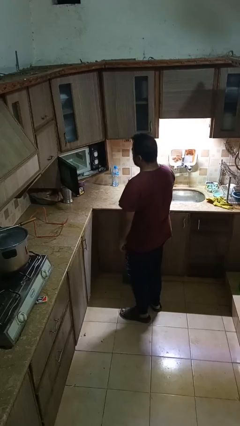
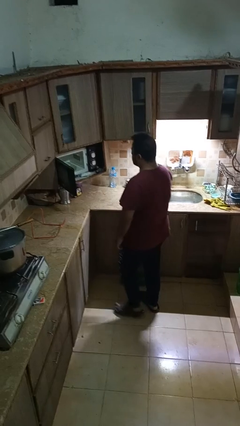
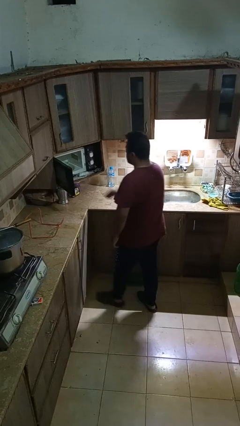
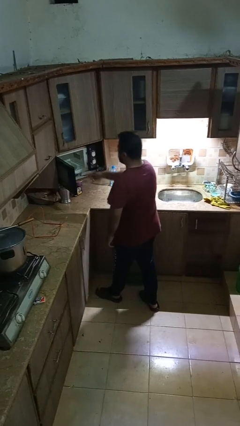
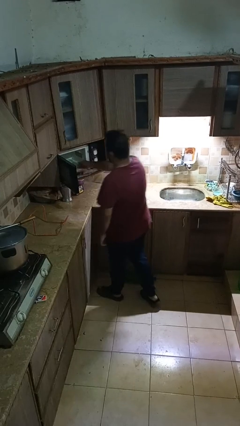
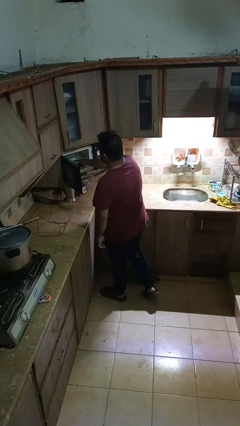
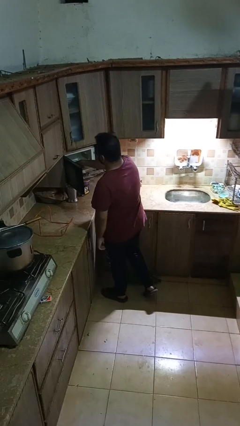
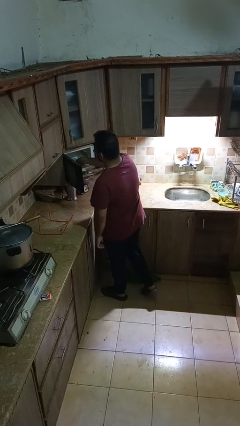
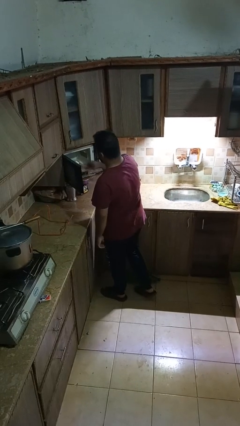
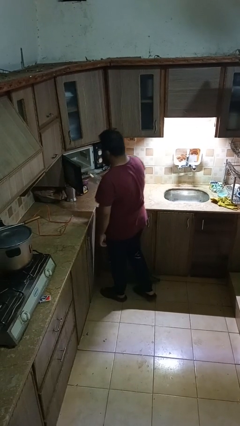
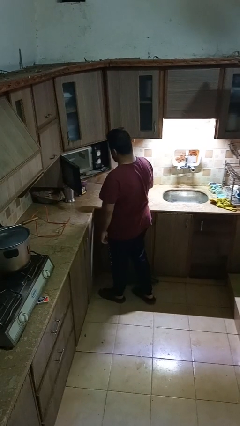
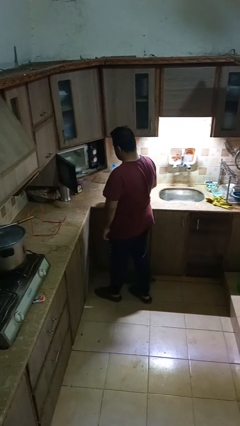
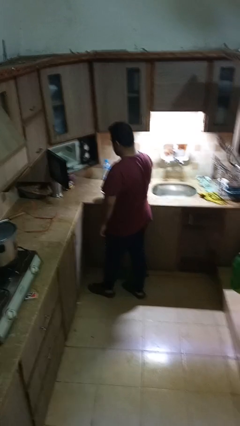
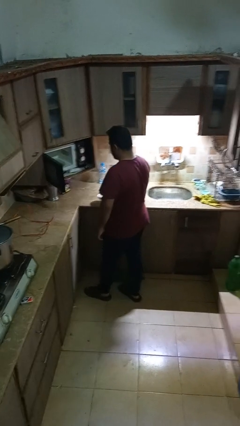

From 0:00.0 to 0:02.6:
person takes object from microwave

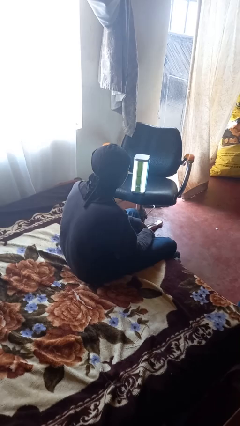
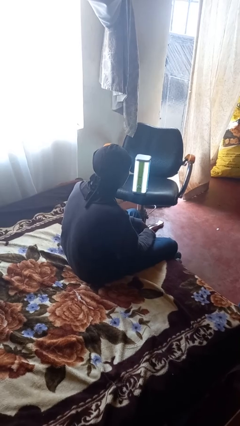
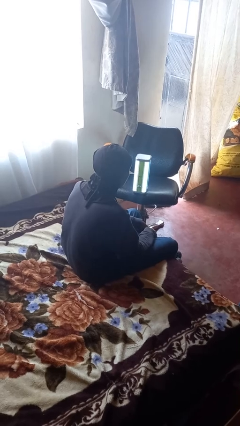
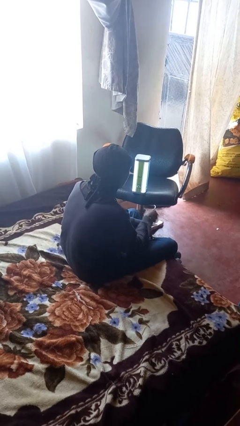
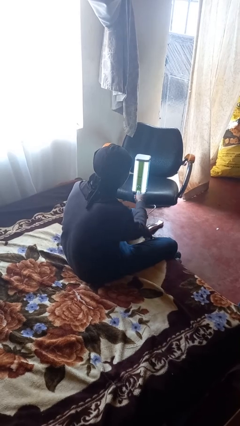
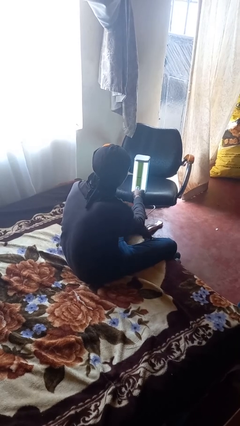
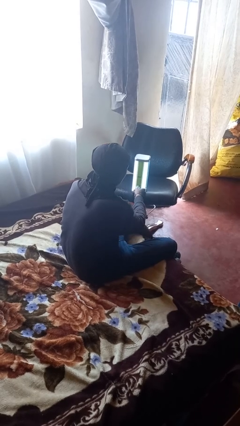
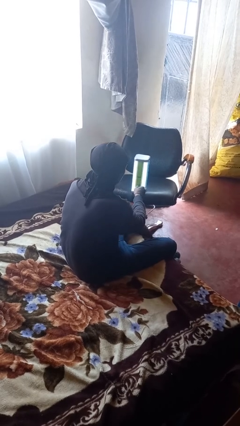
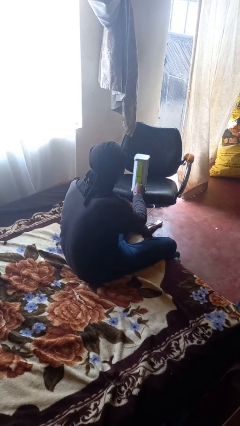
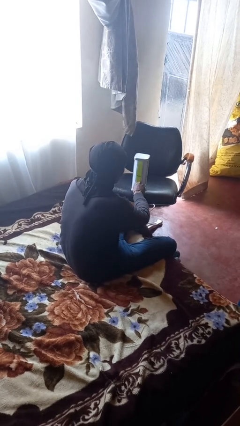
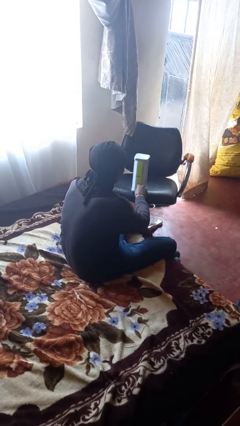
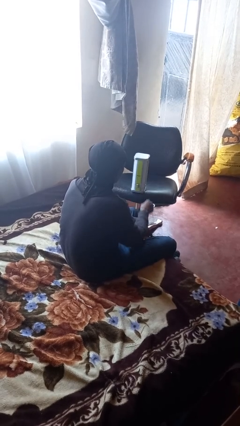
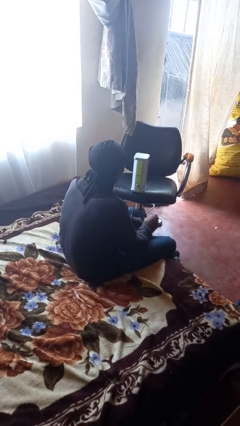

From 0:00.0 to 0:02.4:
person turns off lamp

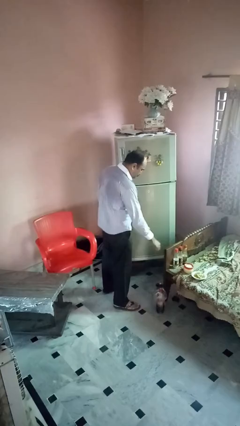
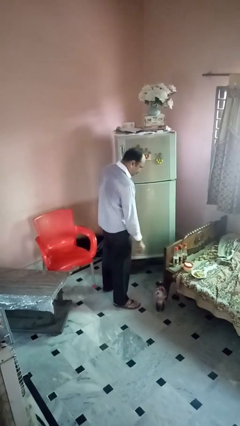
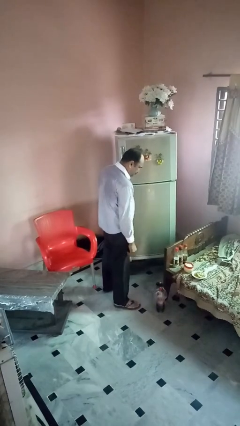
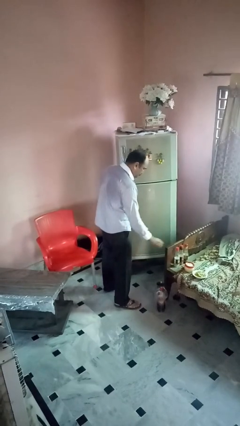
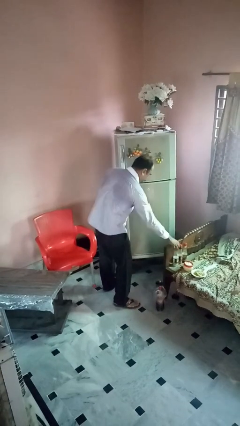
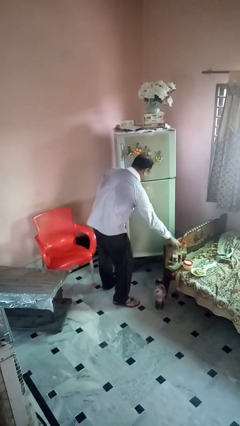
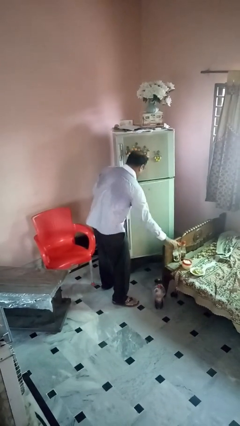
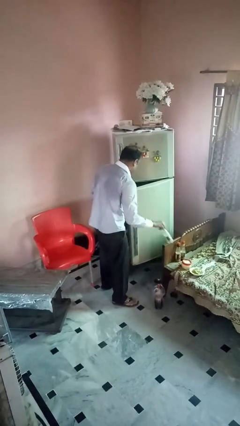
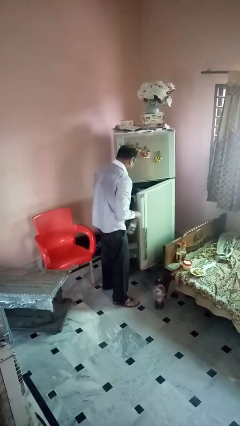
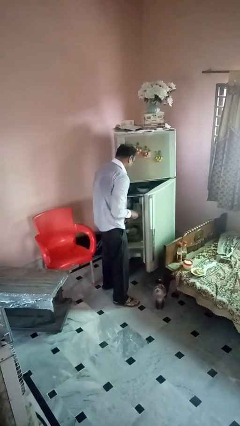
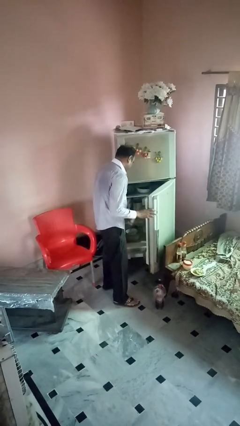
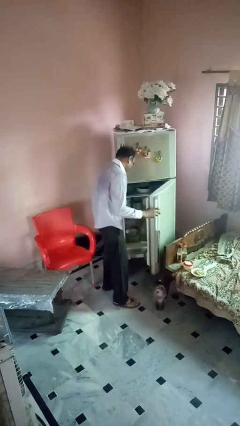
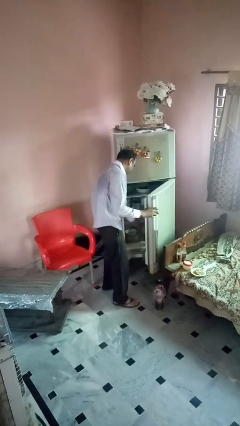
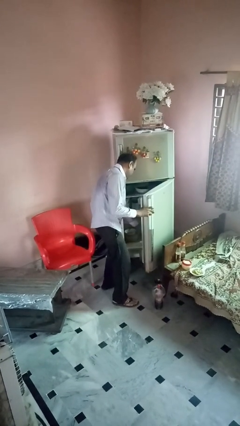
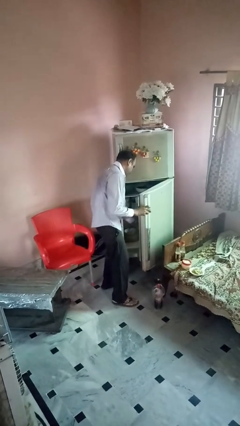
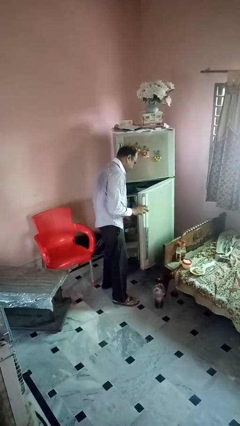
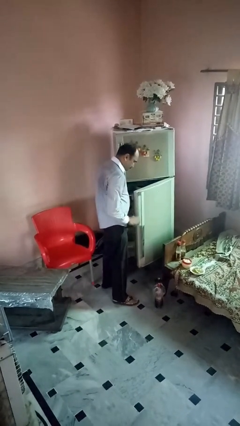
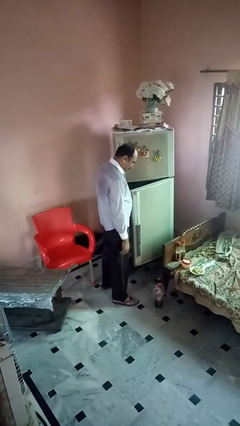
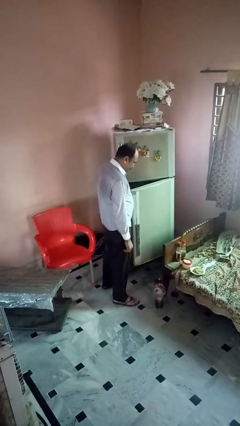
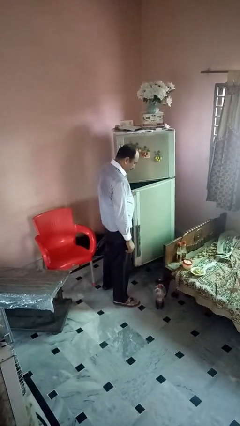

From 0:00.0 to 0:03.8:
person loads groceries into refrigerator

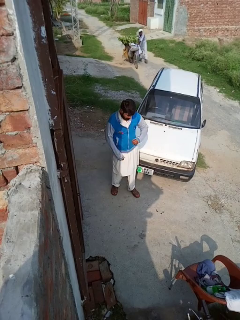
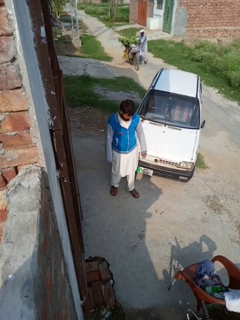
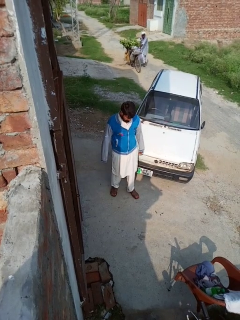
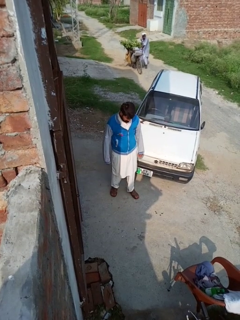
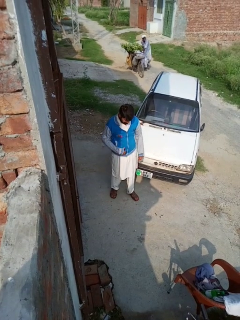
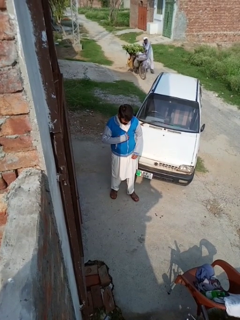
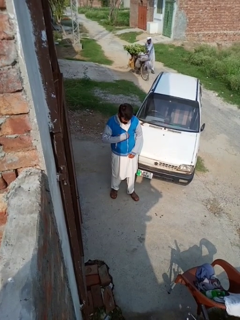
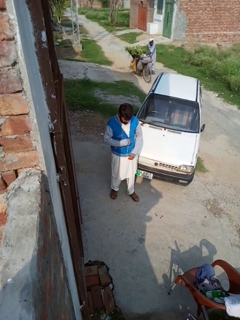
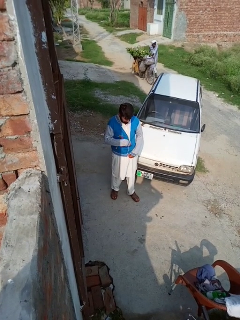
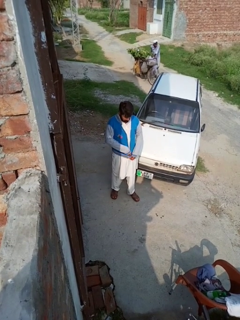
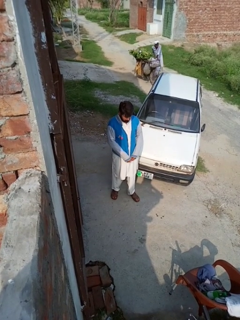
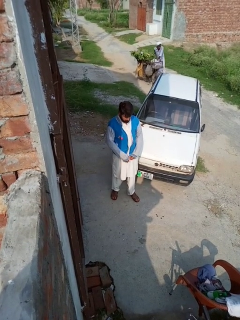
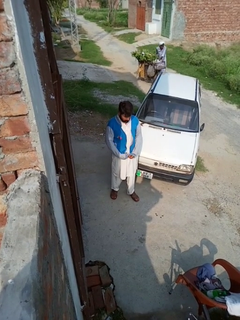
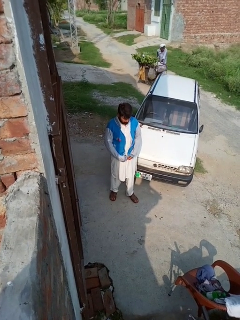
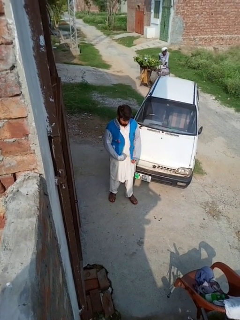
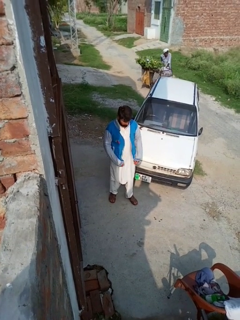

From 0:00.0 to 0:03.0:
person unzips jacket

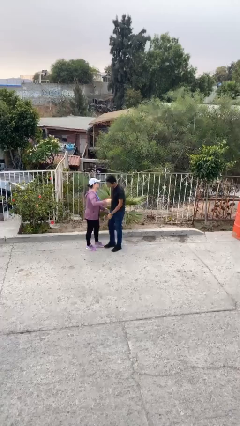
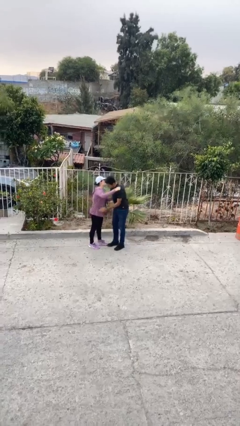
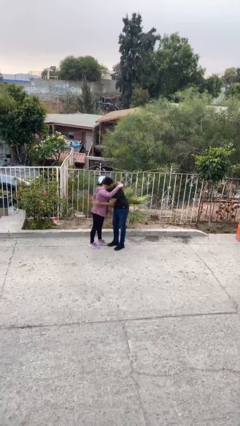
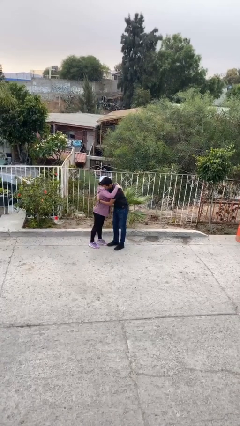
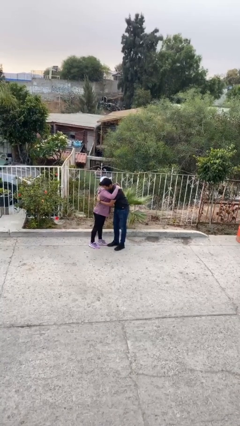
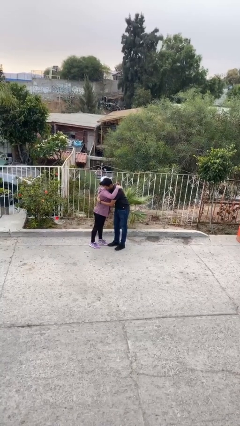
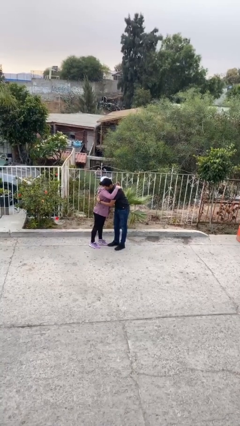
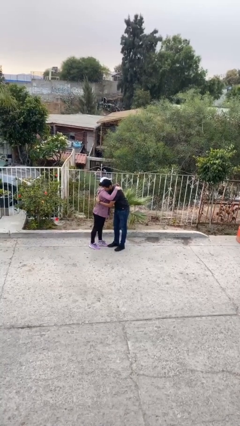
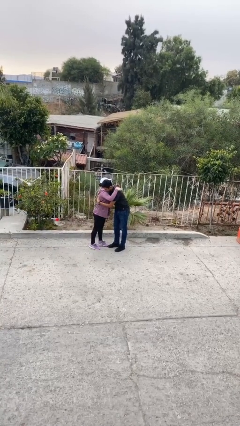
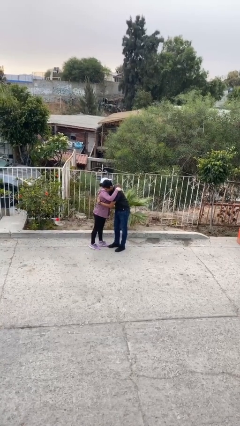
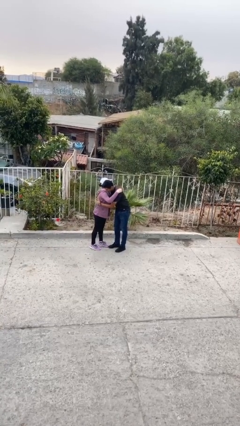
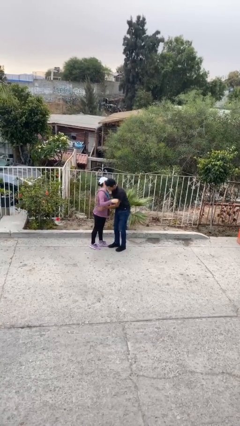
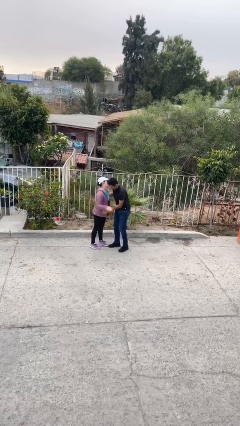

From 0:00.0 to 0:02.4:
person embraces person

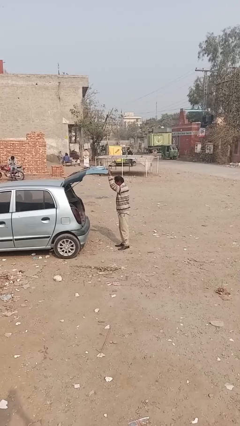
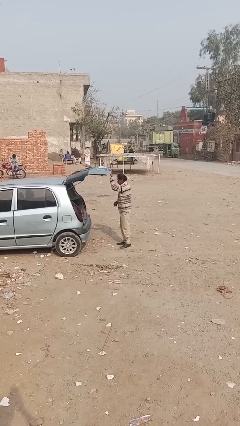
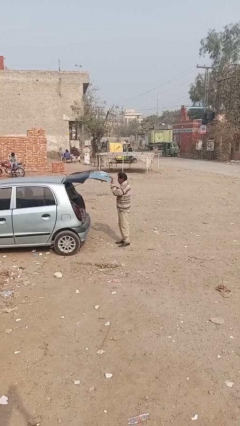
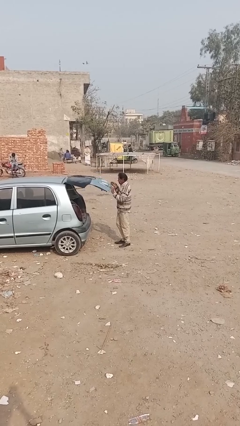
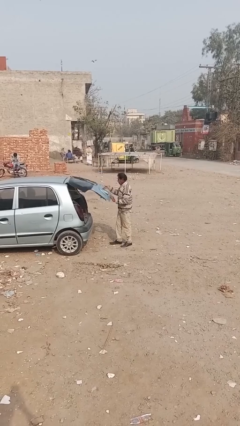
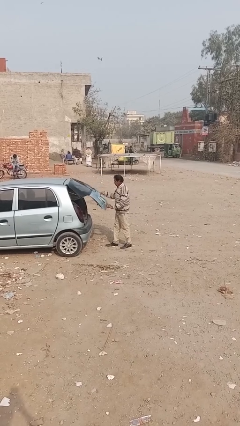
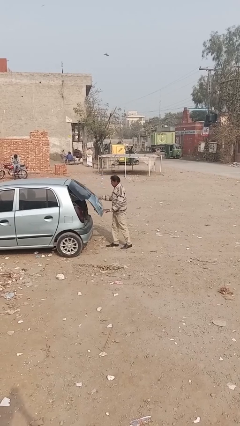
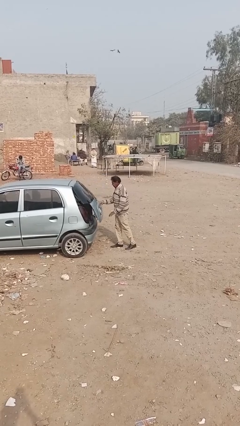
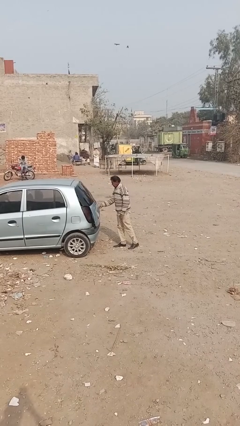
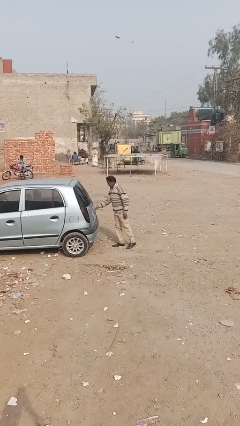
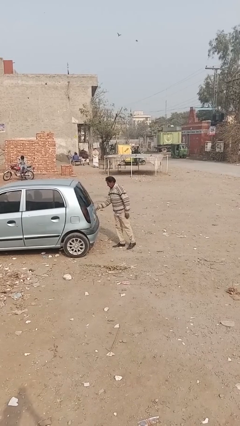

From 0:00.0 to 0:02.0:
person closes car trunk

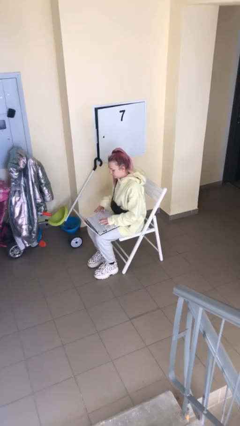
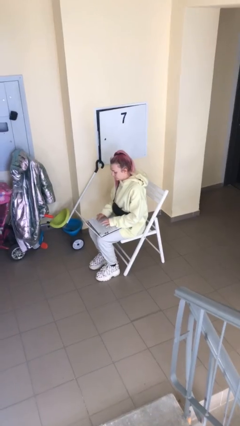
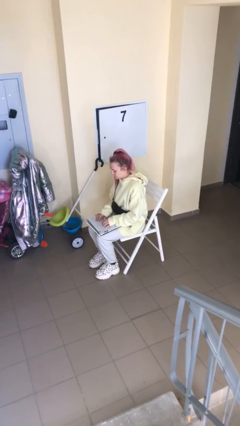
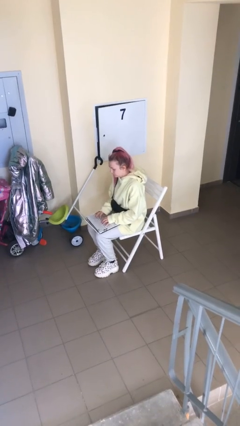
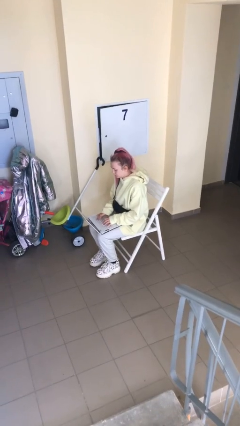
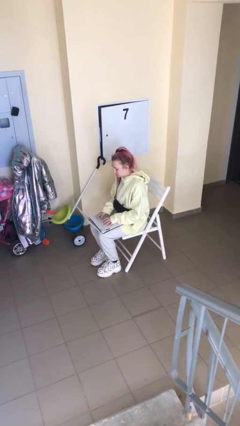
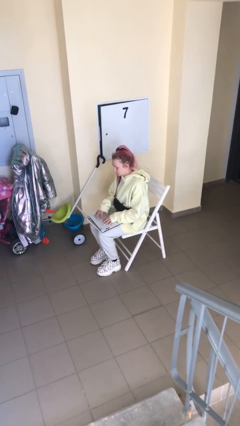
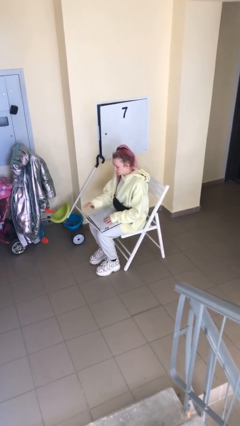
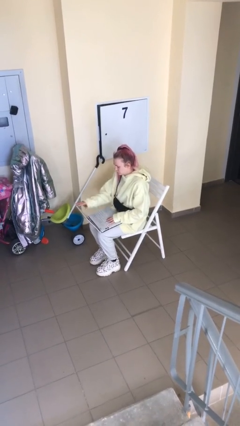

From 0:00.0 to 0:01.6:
person interacts with laptop
